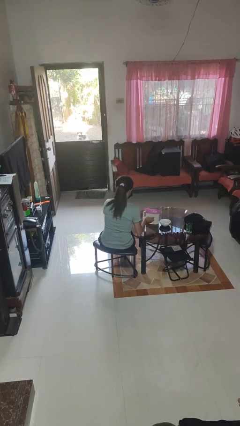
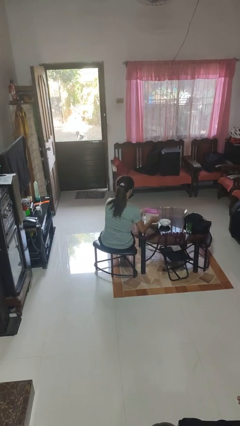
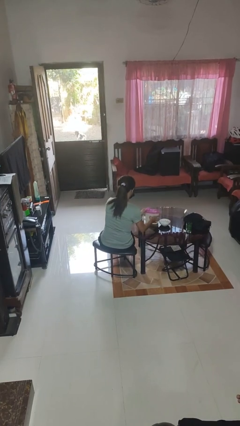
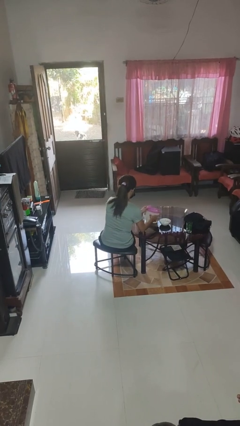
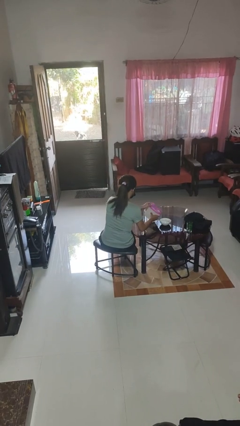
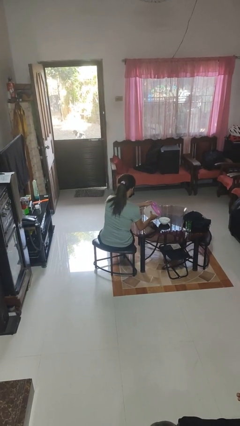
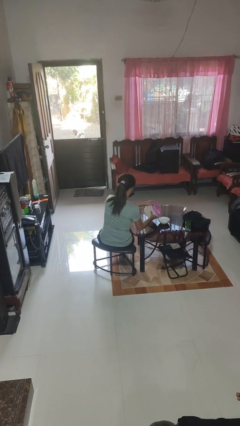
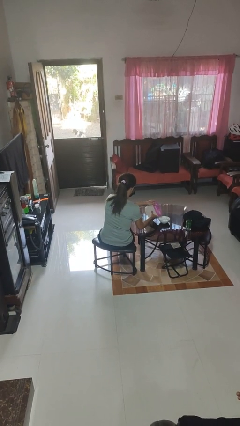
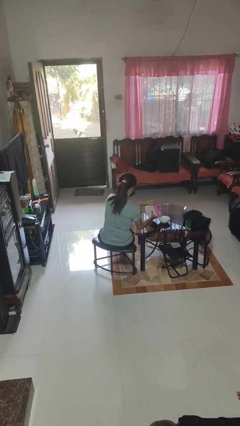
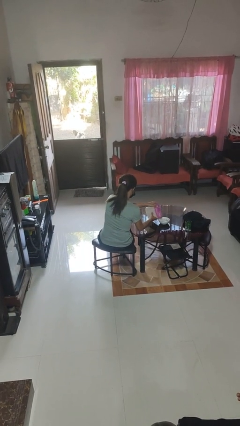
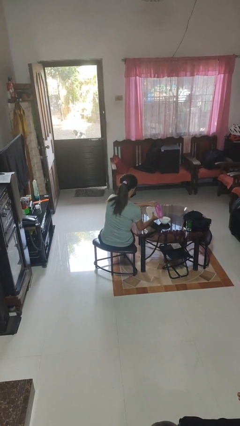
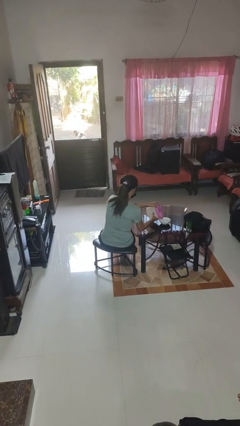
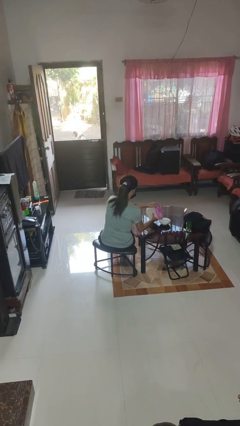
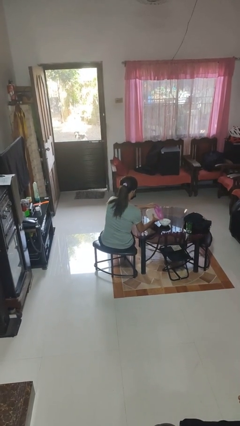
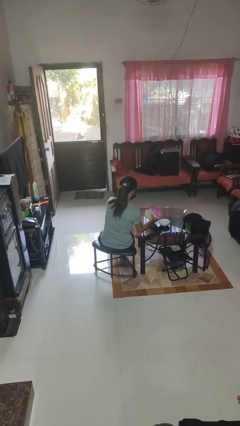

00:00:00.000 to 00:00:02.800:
person pours into bowl

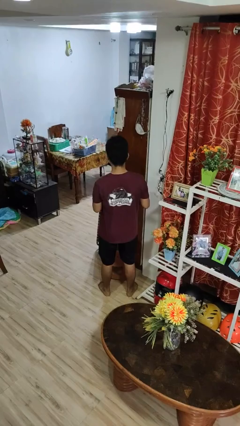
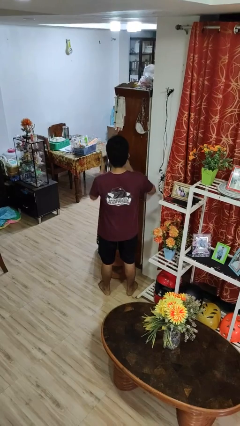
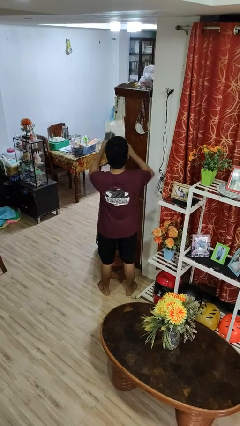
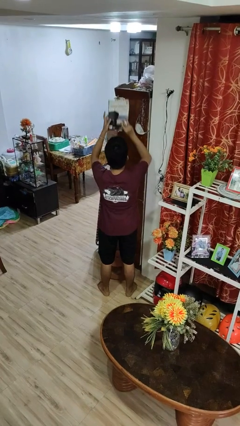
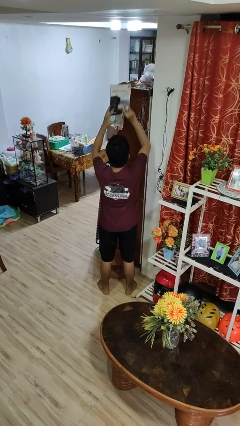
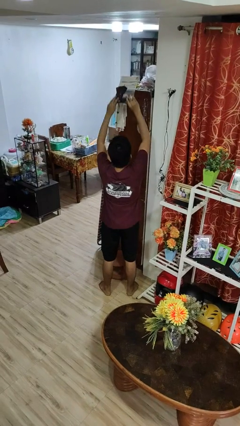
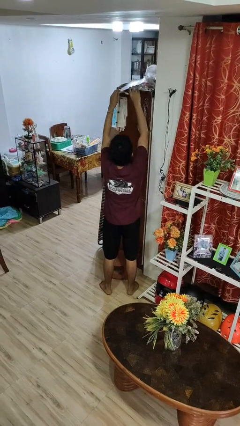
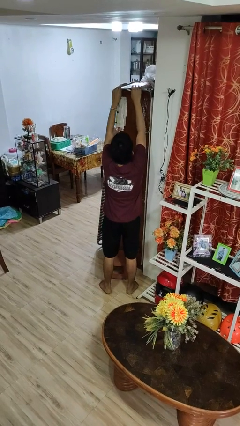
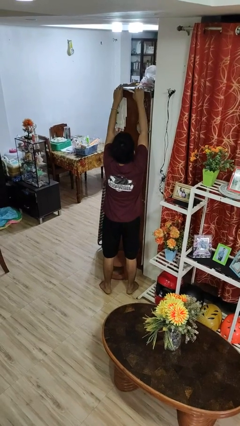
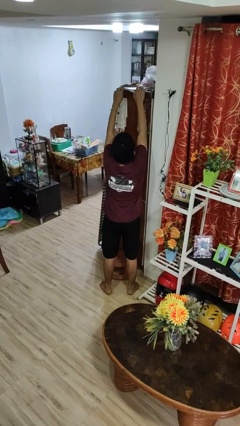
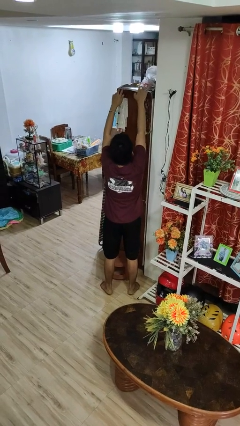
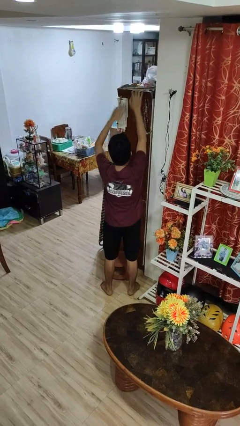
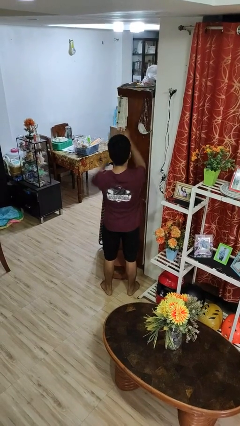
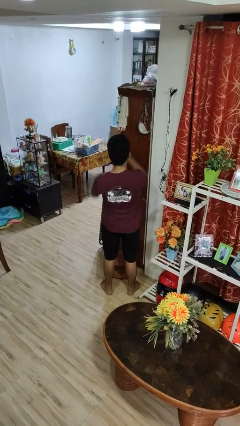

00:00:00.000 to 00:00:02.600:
person puts down object on shelf

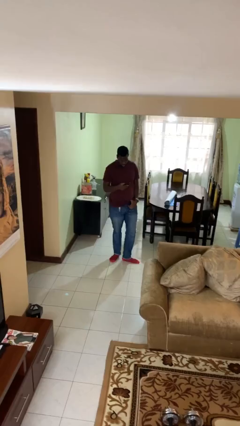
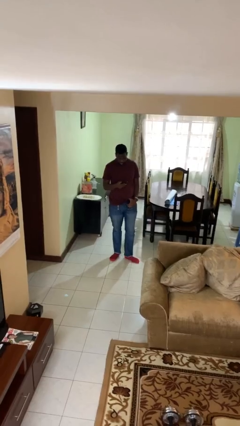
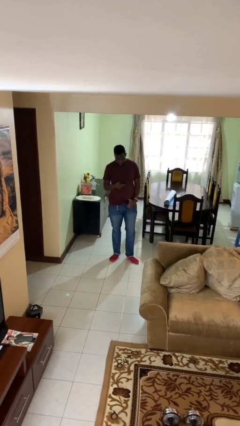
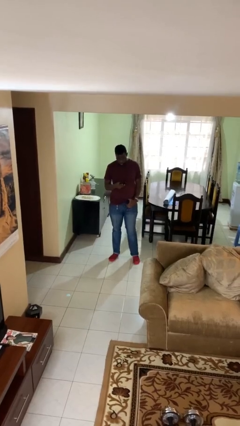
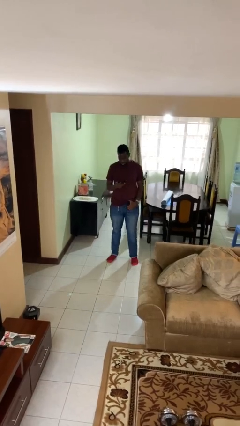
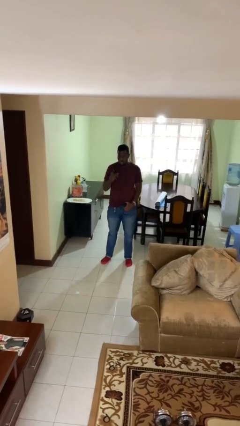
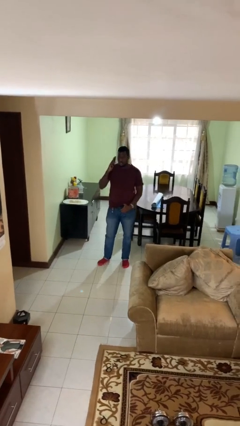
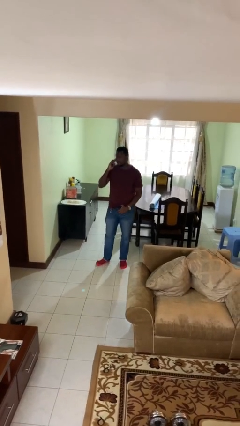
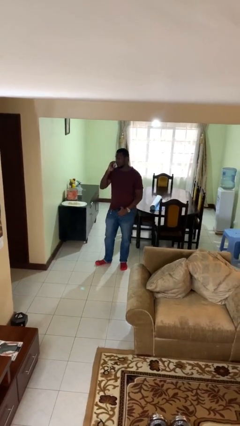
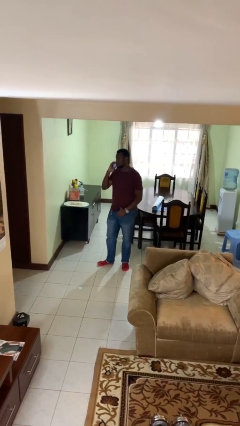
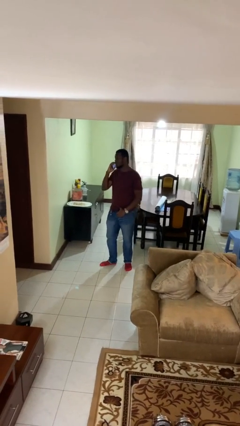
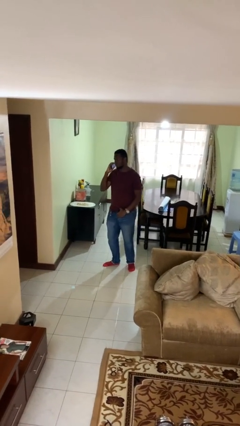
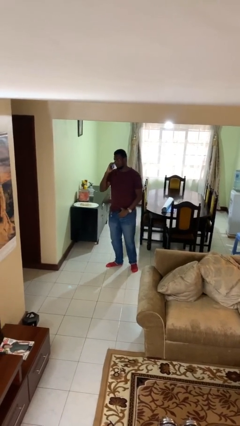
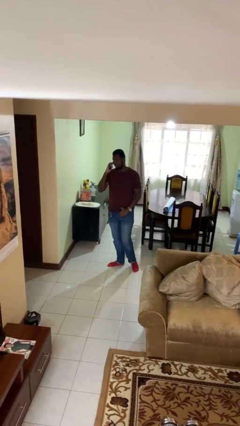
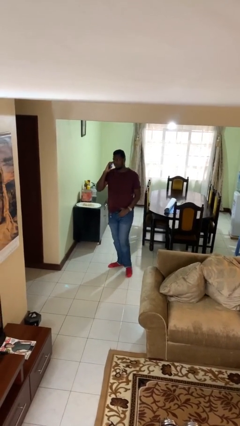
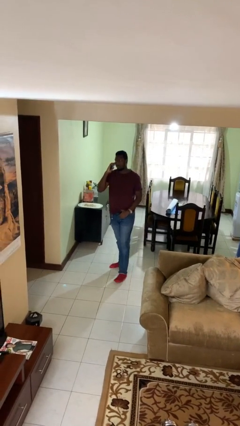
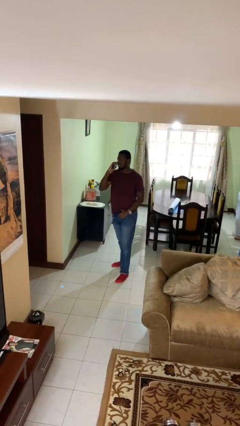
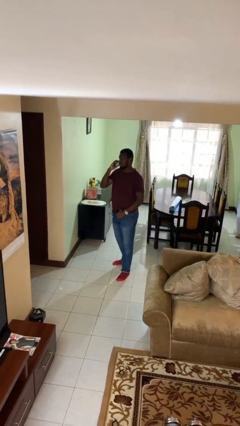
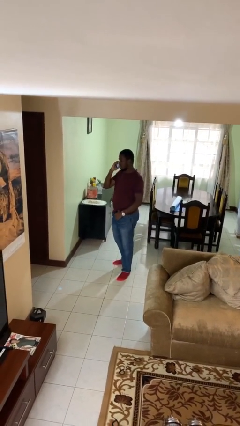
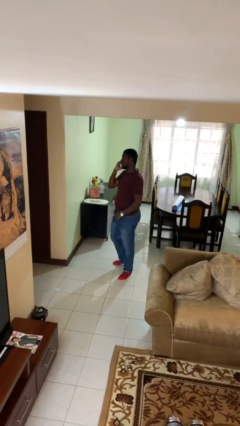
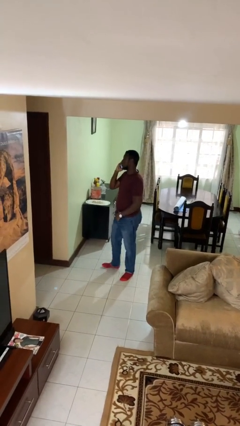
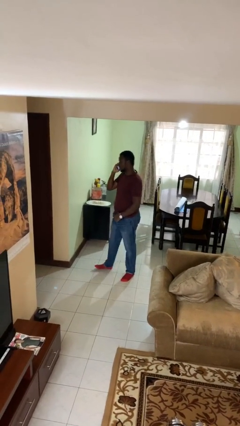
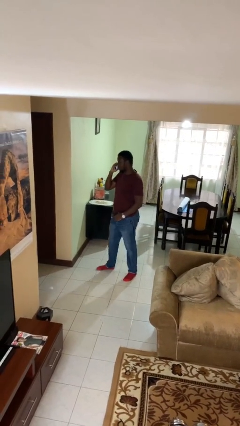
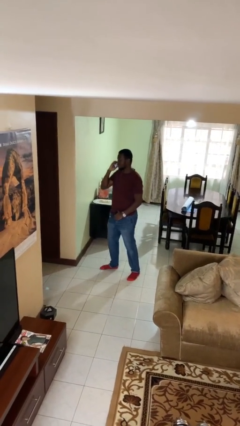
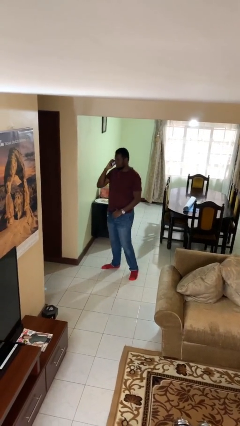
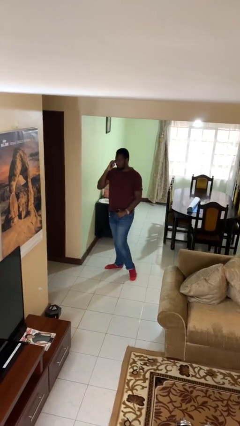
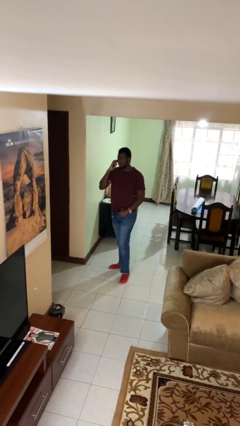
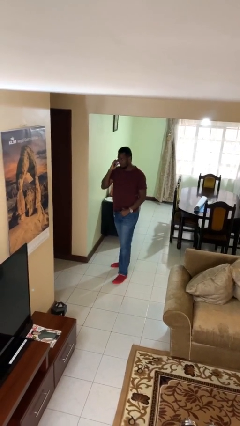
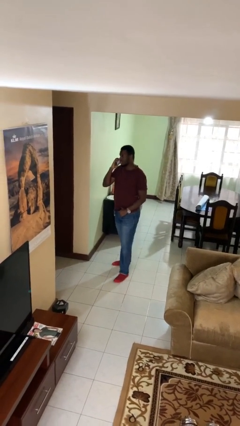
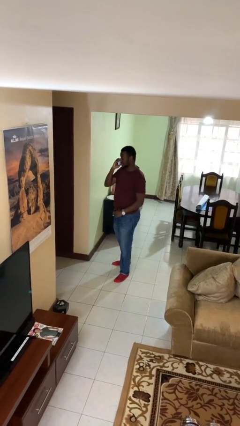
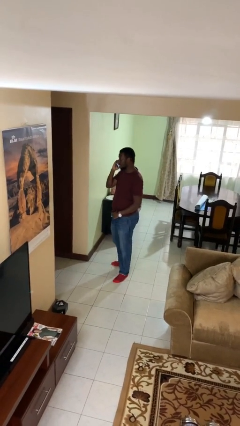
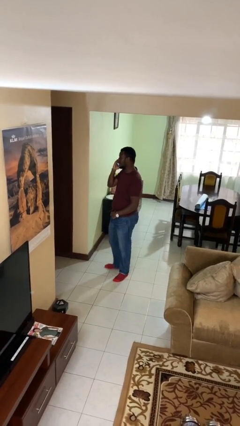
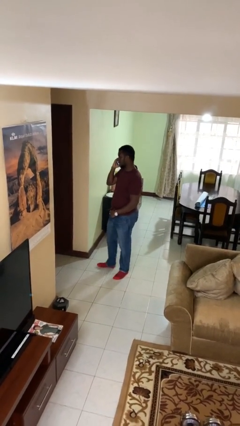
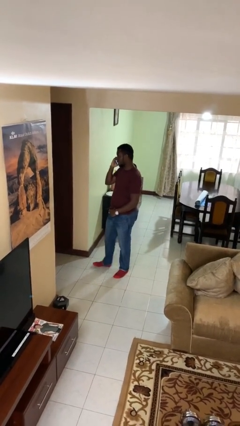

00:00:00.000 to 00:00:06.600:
person talks on phone

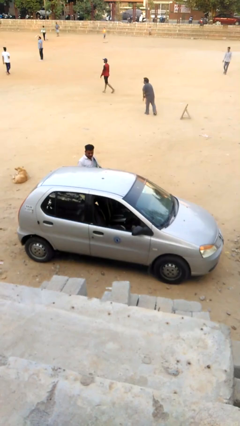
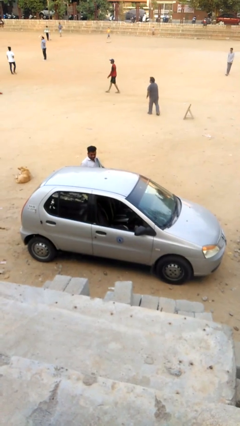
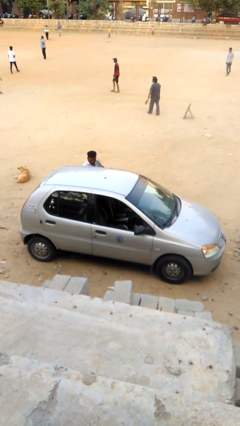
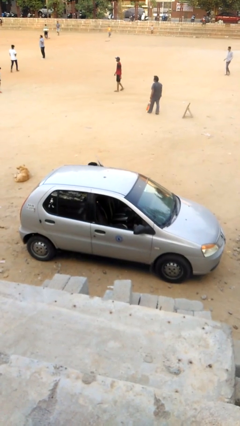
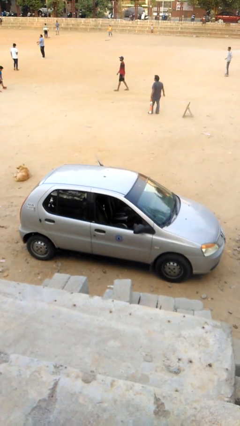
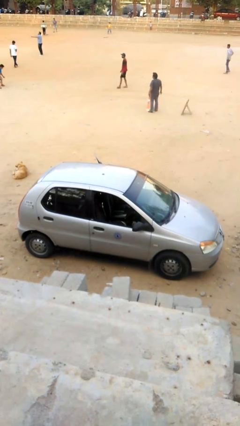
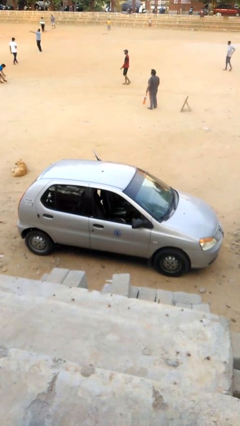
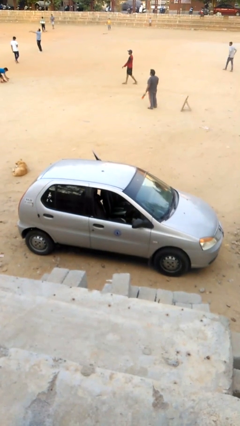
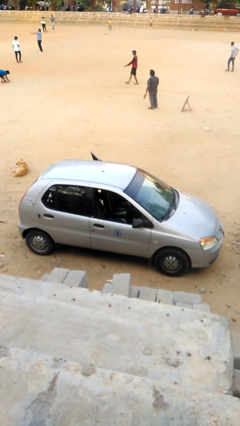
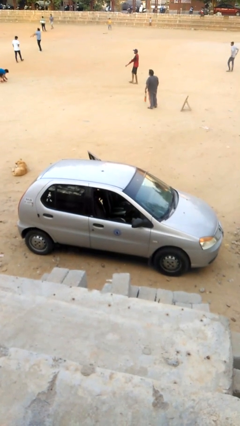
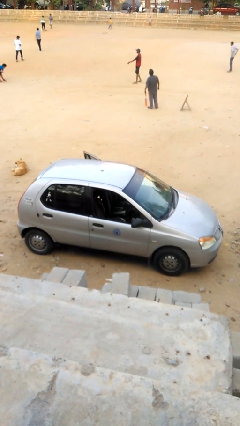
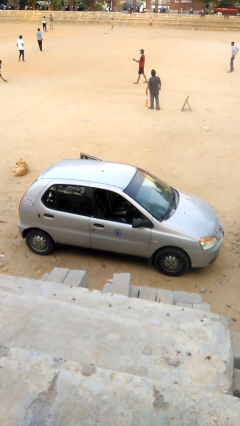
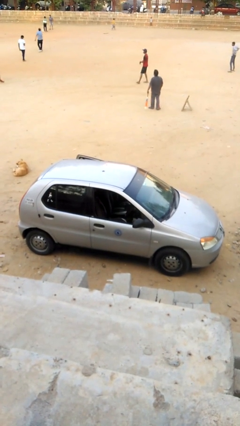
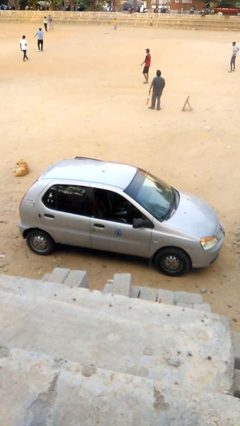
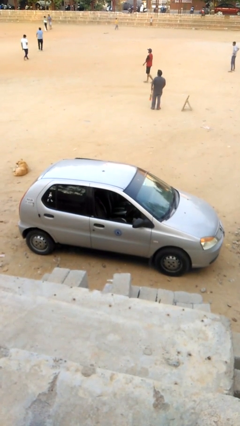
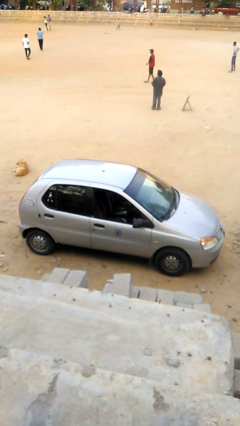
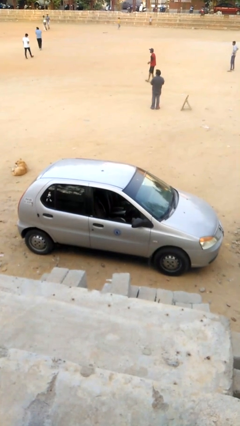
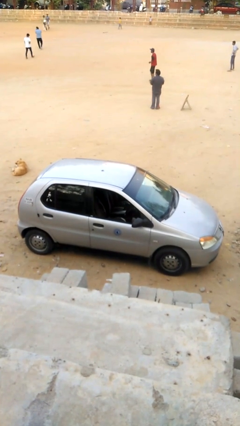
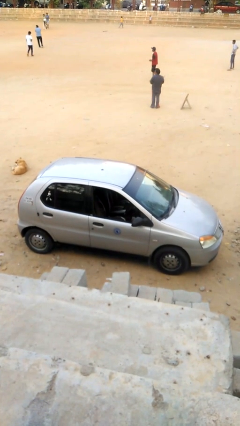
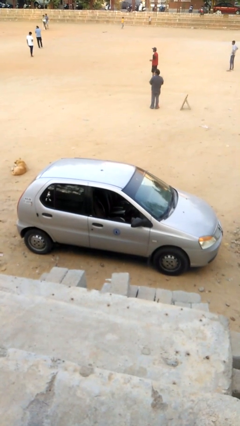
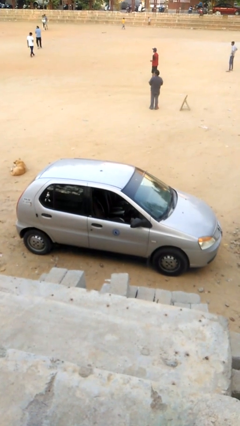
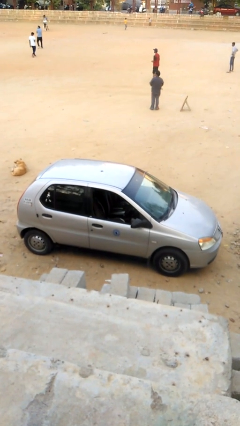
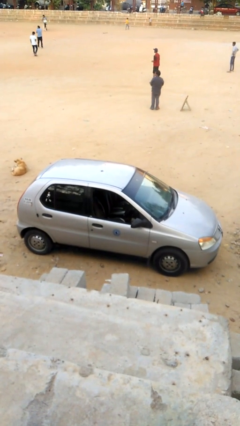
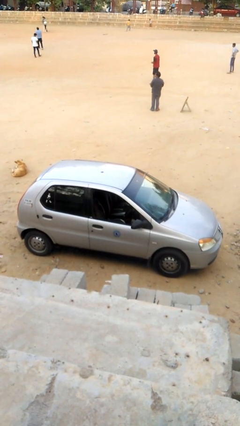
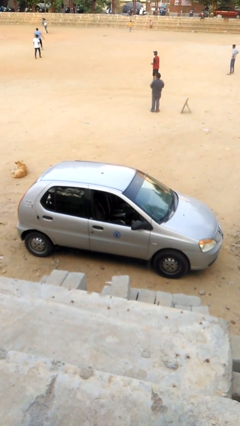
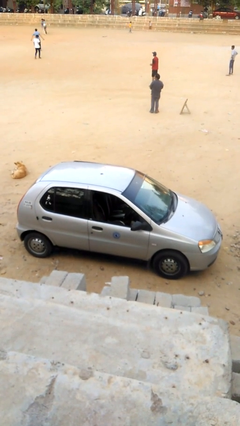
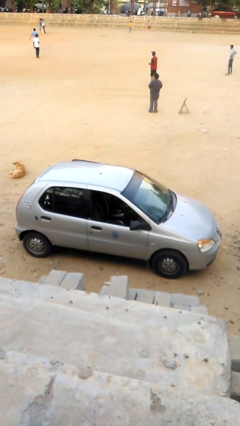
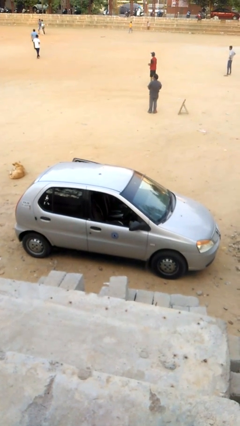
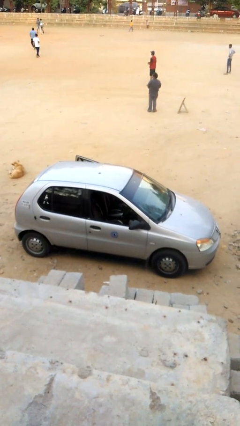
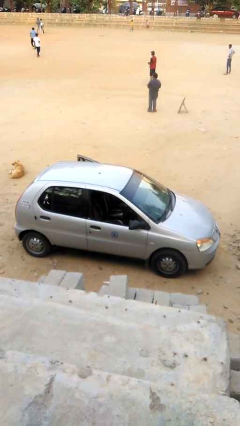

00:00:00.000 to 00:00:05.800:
car picks up person

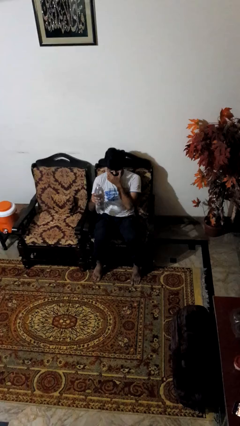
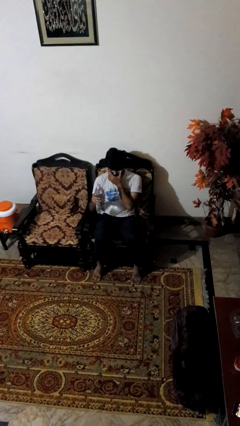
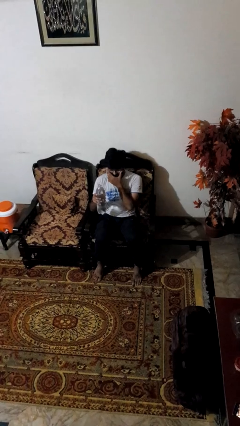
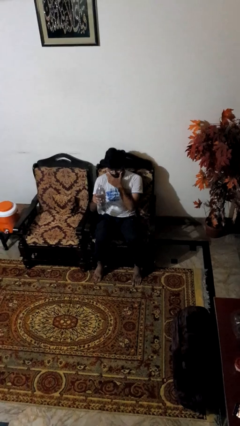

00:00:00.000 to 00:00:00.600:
person drinks from bottle
